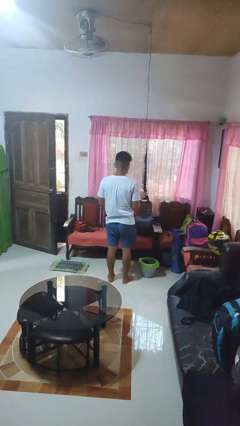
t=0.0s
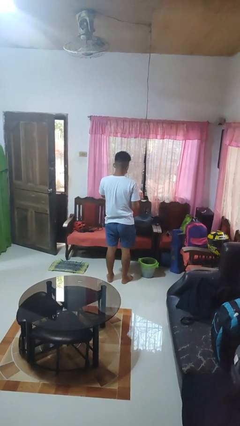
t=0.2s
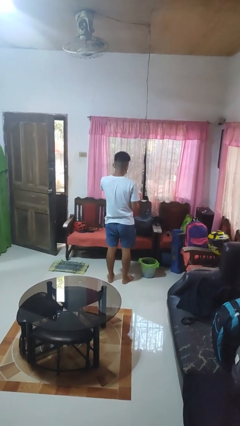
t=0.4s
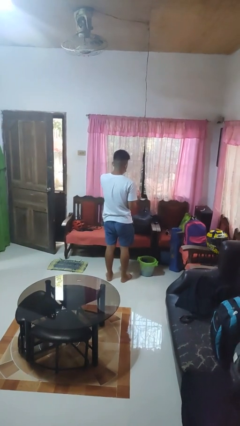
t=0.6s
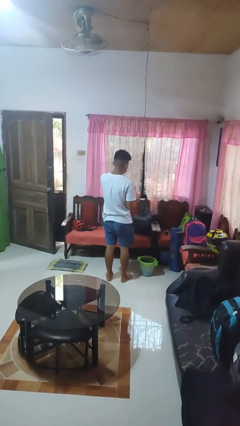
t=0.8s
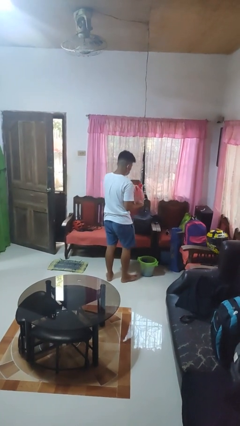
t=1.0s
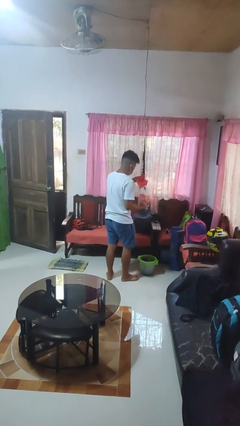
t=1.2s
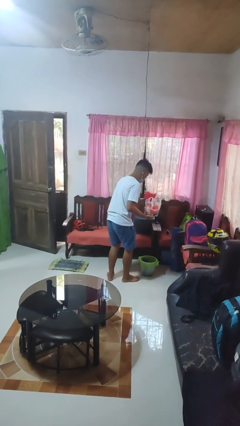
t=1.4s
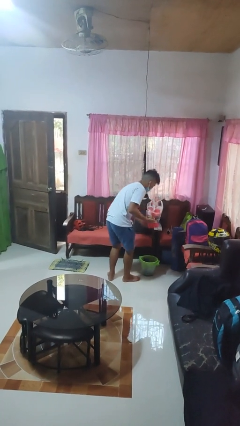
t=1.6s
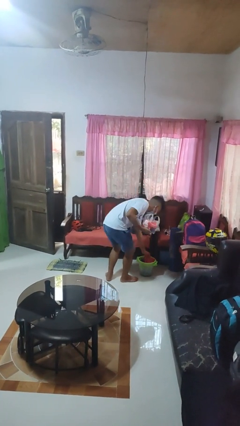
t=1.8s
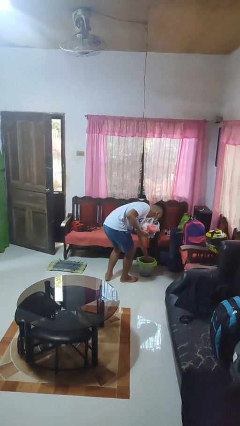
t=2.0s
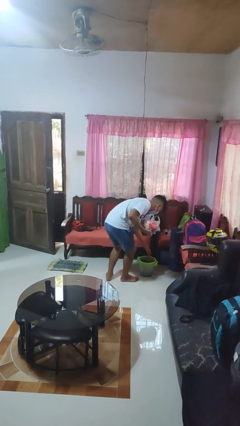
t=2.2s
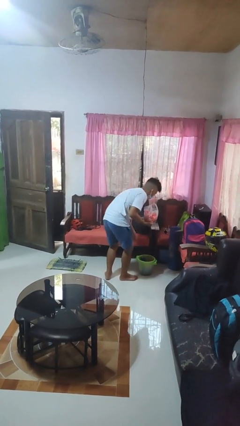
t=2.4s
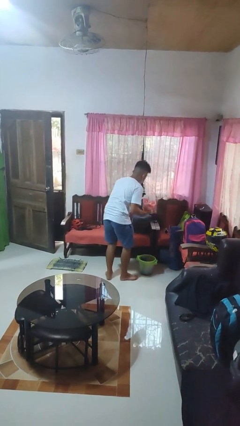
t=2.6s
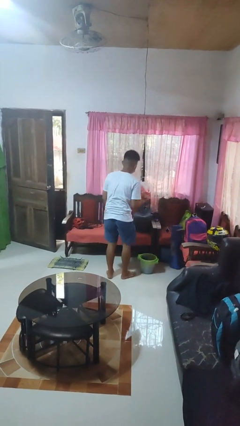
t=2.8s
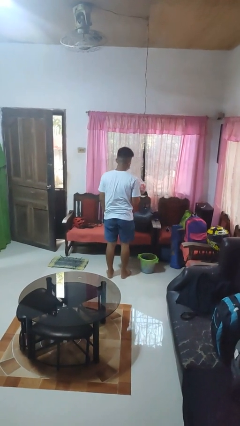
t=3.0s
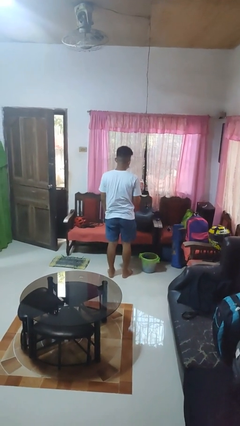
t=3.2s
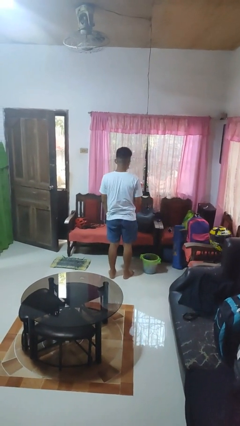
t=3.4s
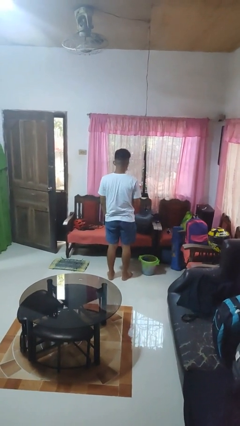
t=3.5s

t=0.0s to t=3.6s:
person discards trash

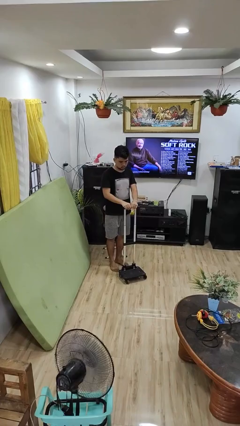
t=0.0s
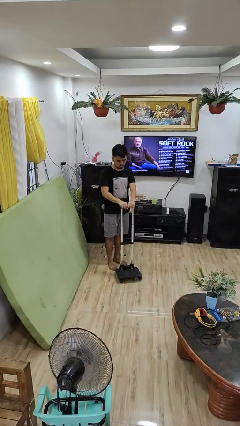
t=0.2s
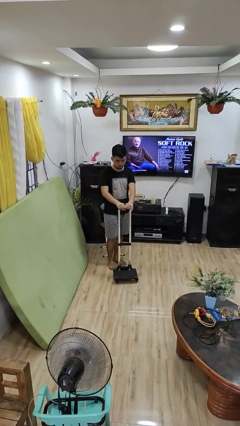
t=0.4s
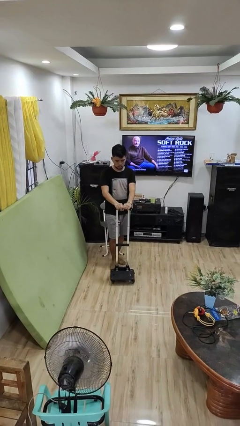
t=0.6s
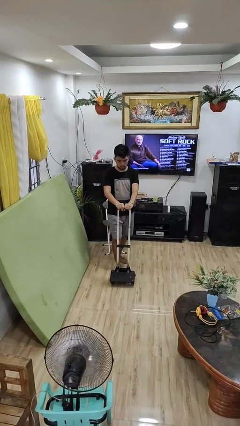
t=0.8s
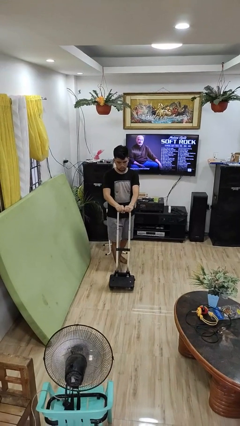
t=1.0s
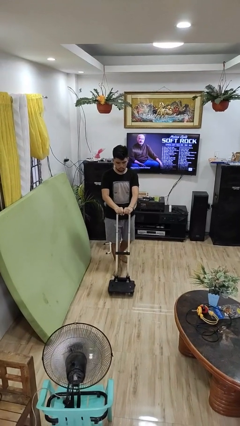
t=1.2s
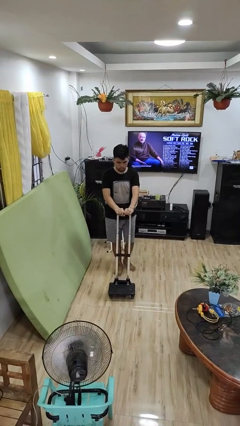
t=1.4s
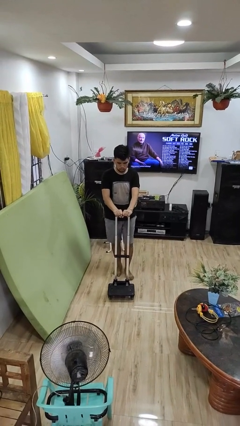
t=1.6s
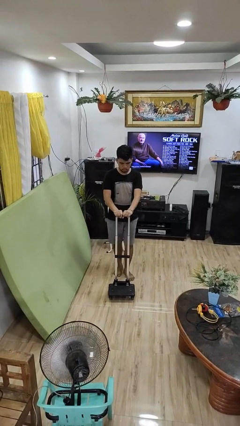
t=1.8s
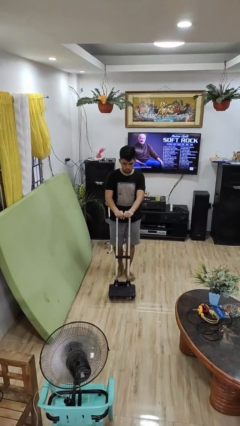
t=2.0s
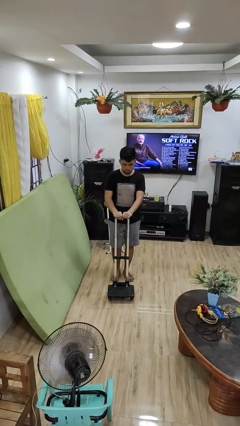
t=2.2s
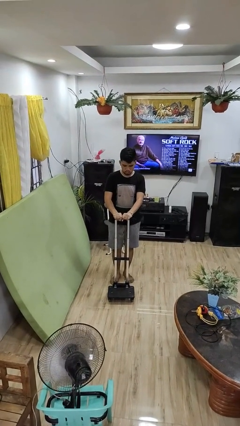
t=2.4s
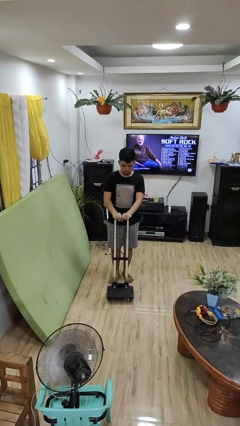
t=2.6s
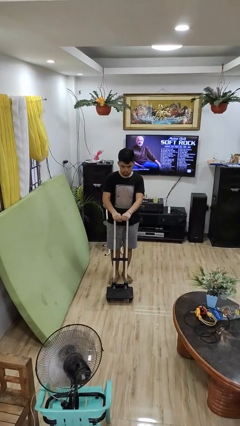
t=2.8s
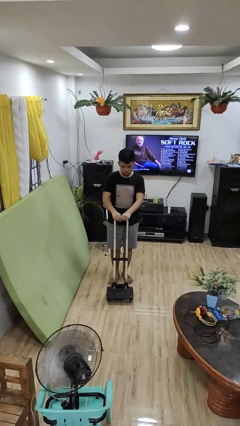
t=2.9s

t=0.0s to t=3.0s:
person pushes wheeled cart

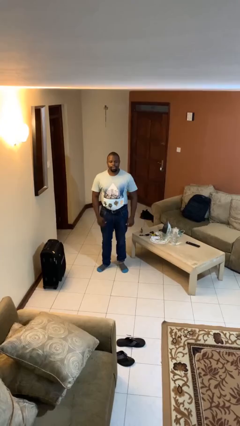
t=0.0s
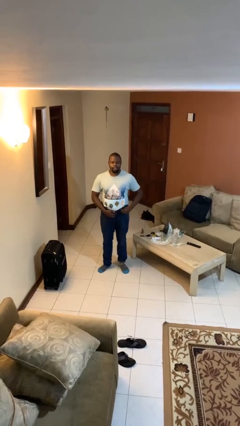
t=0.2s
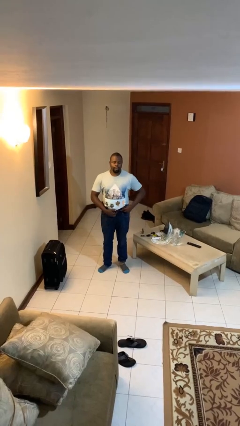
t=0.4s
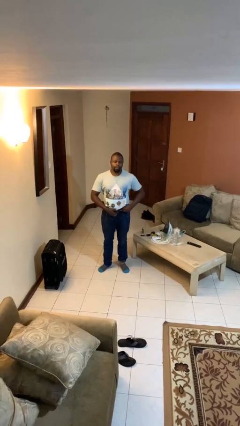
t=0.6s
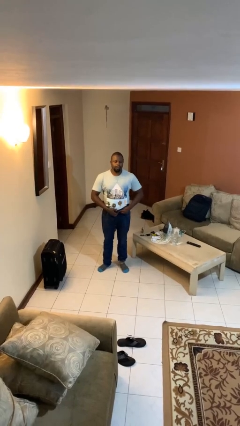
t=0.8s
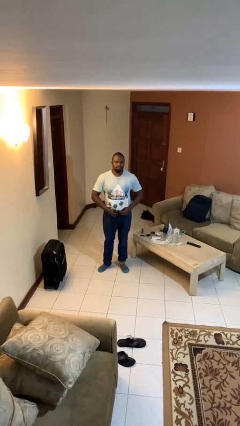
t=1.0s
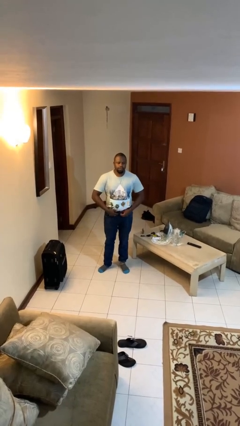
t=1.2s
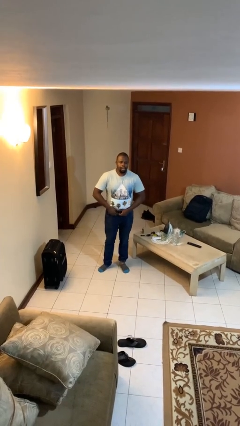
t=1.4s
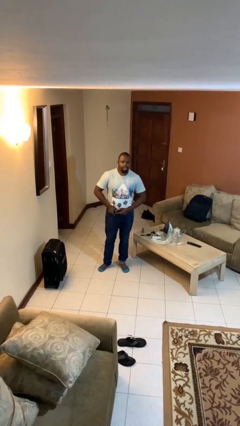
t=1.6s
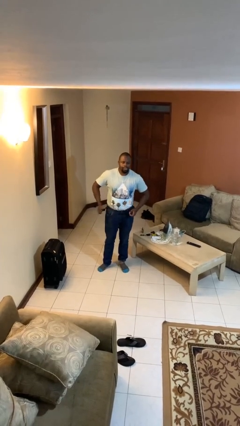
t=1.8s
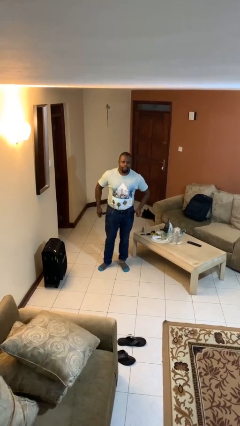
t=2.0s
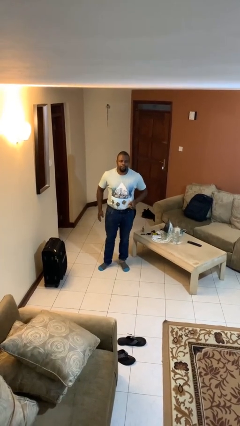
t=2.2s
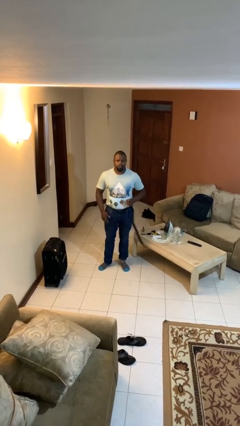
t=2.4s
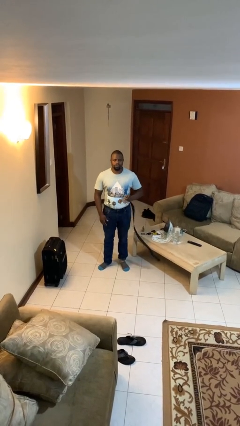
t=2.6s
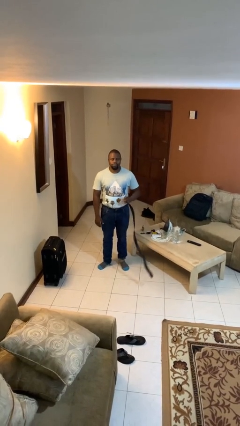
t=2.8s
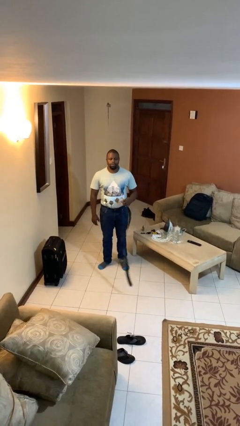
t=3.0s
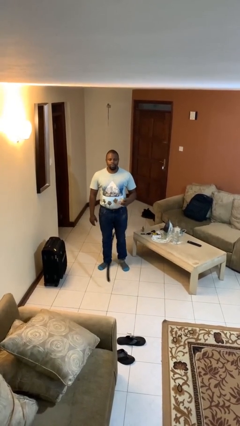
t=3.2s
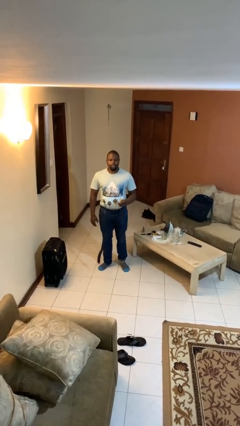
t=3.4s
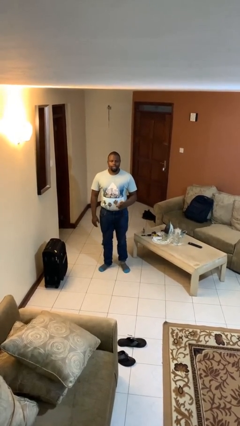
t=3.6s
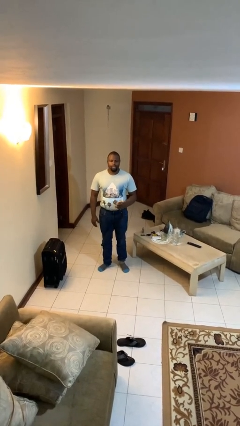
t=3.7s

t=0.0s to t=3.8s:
person takes off belt

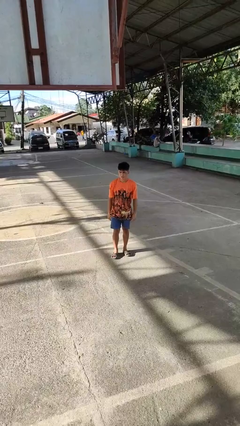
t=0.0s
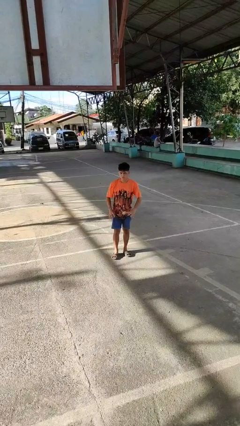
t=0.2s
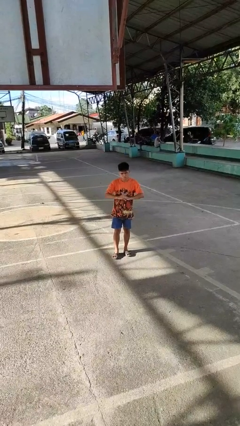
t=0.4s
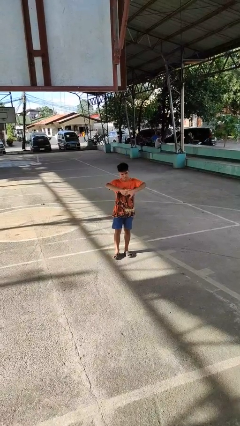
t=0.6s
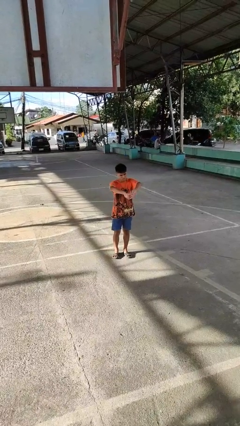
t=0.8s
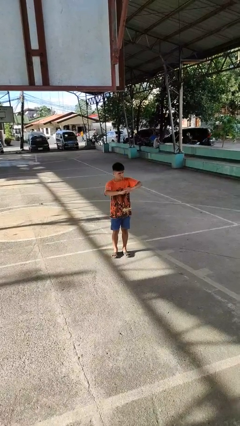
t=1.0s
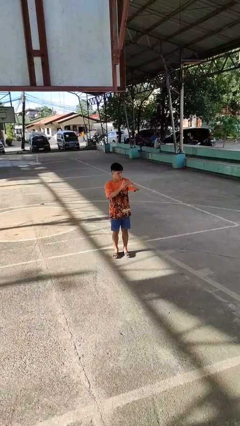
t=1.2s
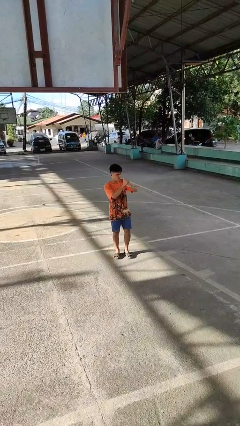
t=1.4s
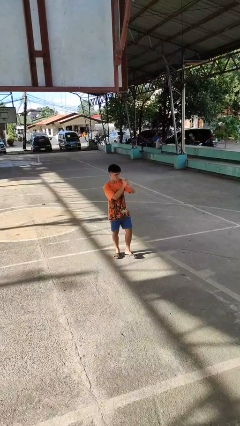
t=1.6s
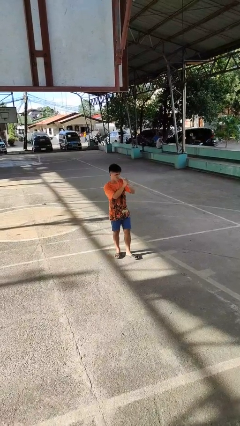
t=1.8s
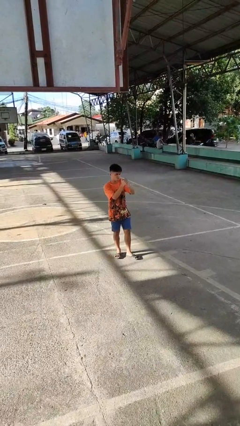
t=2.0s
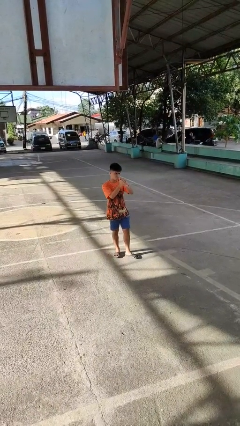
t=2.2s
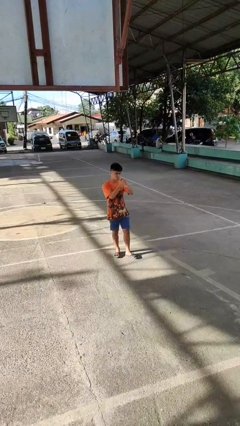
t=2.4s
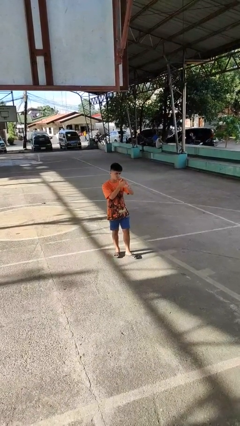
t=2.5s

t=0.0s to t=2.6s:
person cracks knuckles

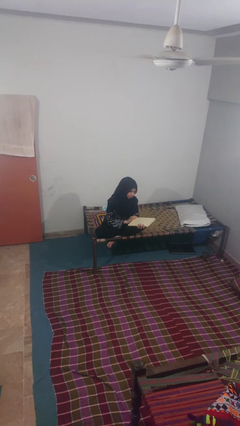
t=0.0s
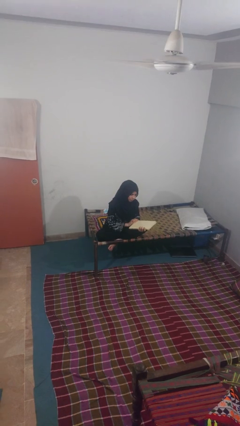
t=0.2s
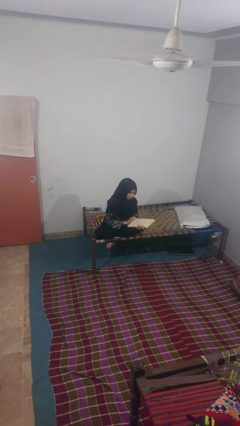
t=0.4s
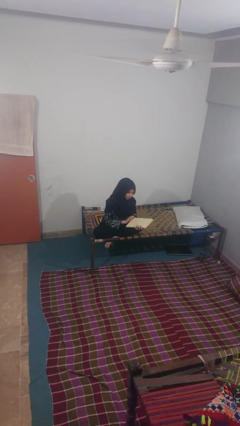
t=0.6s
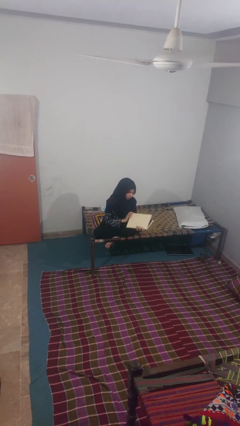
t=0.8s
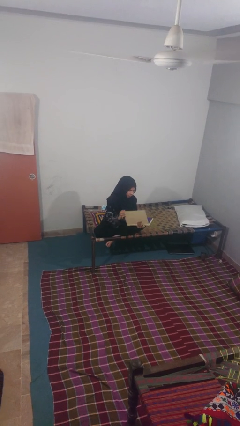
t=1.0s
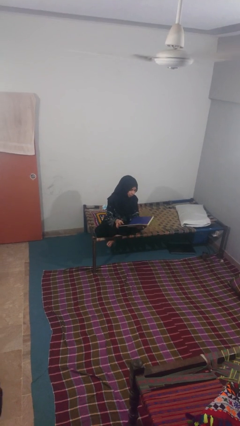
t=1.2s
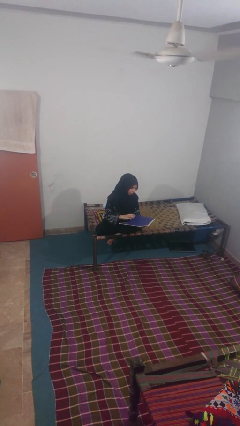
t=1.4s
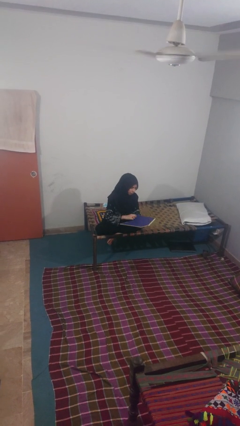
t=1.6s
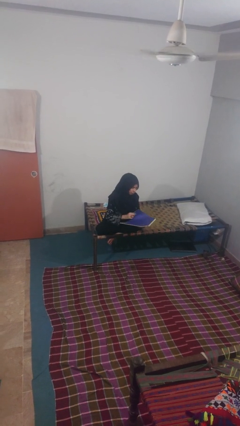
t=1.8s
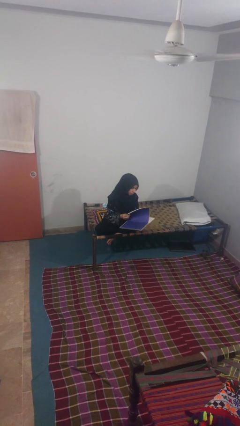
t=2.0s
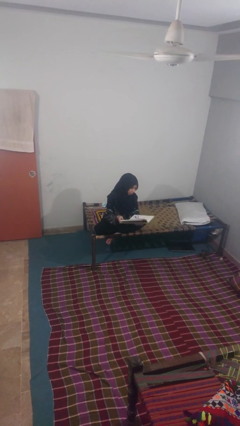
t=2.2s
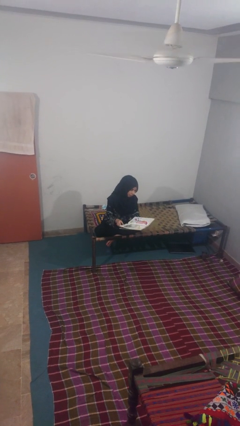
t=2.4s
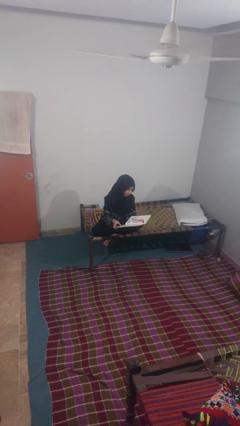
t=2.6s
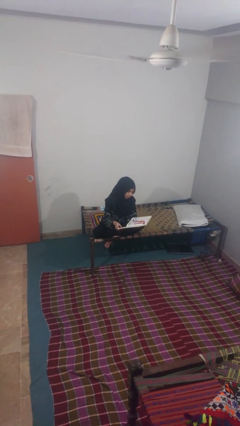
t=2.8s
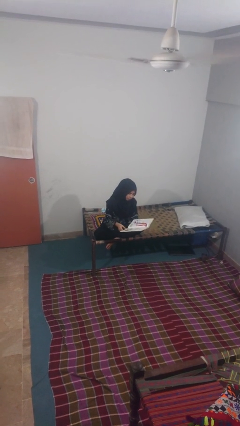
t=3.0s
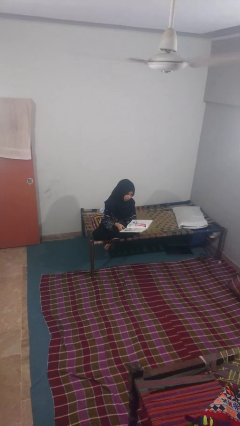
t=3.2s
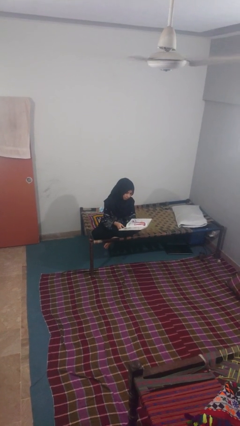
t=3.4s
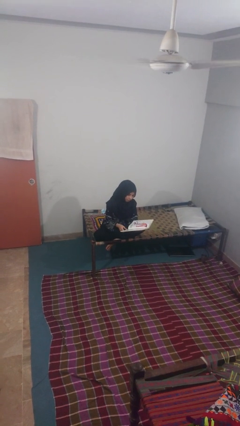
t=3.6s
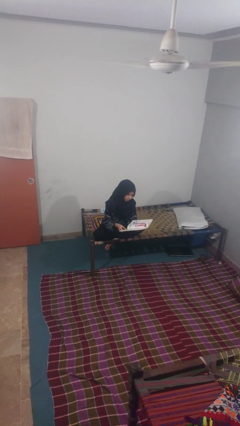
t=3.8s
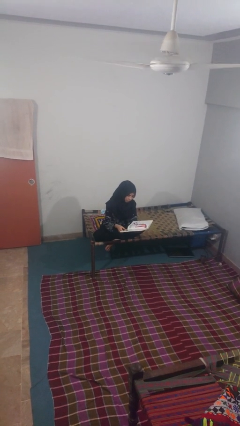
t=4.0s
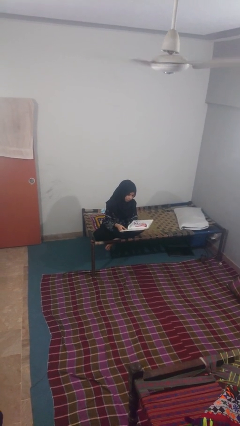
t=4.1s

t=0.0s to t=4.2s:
person reads magazine

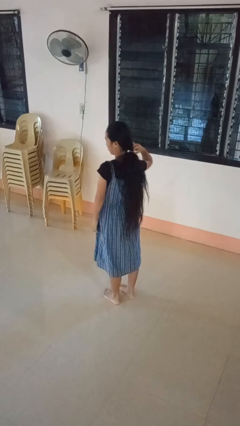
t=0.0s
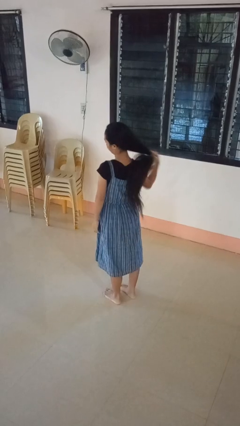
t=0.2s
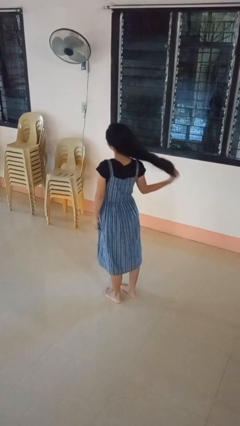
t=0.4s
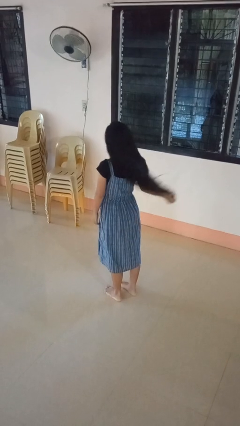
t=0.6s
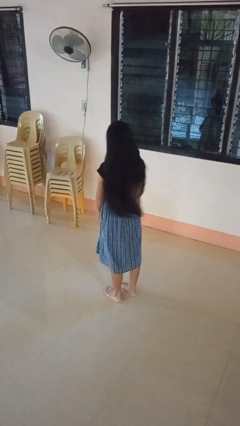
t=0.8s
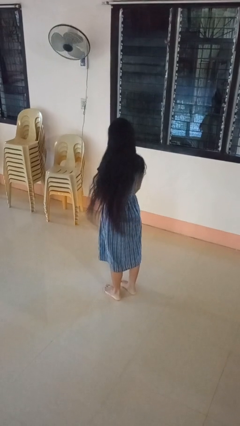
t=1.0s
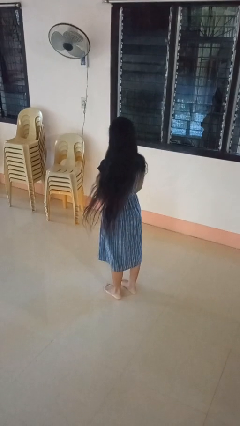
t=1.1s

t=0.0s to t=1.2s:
person takes off hairtie
